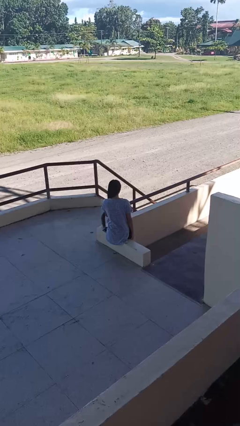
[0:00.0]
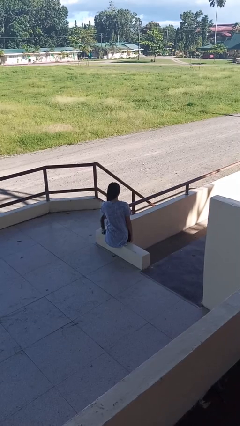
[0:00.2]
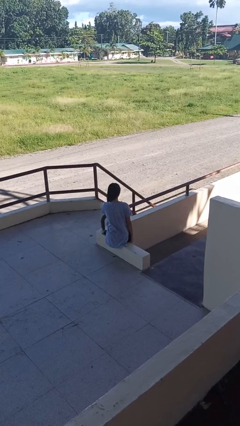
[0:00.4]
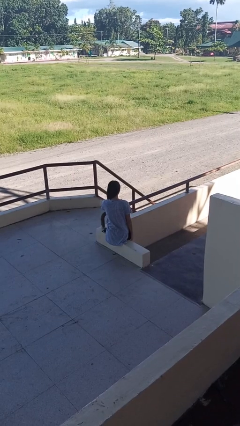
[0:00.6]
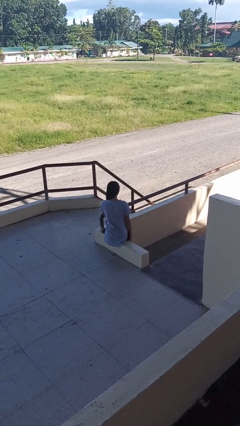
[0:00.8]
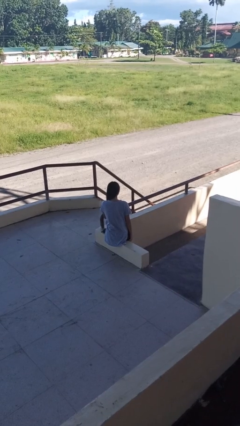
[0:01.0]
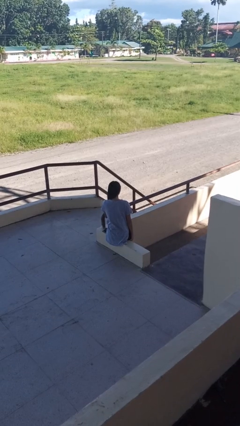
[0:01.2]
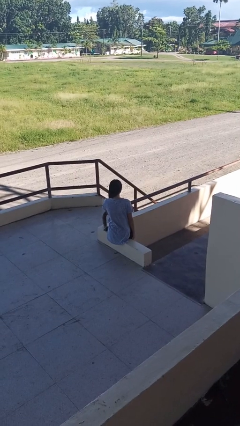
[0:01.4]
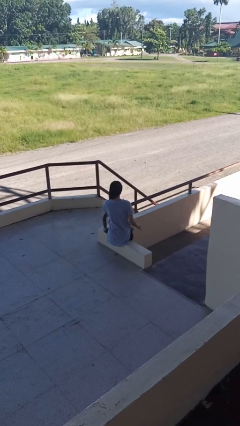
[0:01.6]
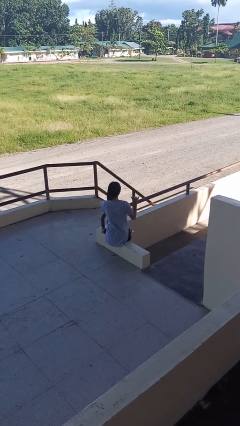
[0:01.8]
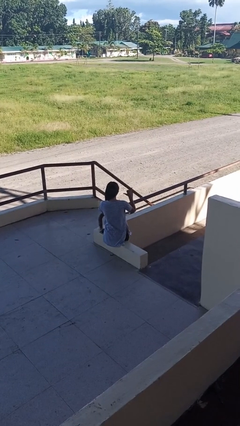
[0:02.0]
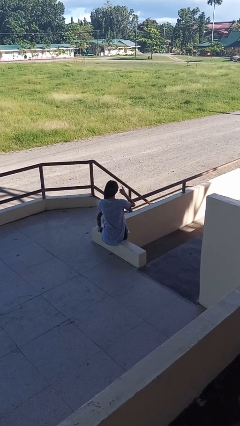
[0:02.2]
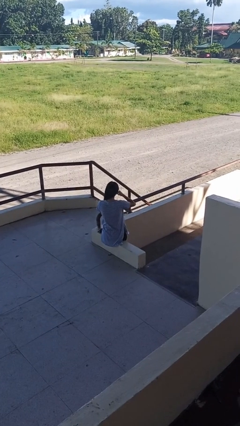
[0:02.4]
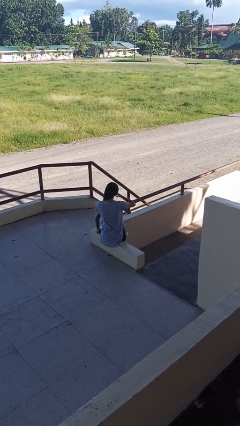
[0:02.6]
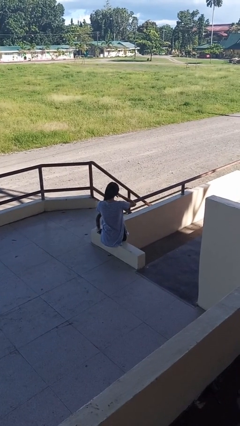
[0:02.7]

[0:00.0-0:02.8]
person gestures call me

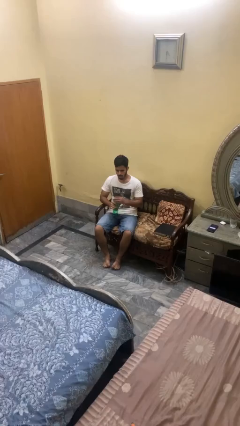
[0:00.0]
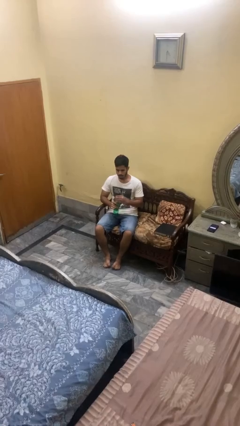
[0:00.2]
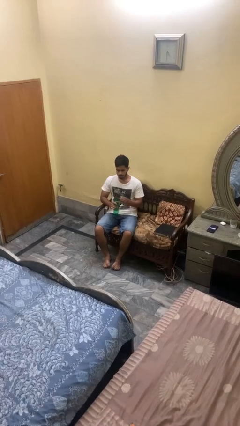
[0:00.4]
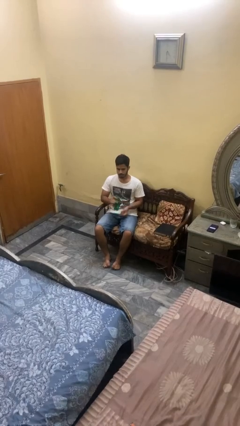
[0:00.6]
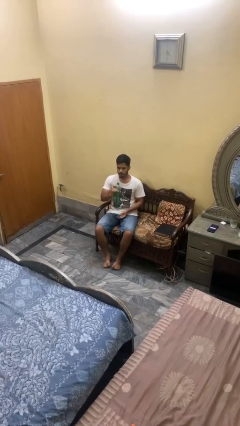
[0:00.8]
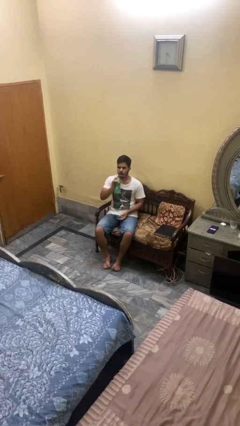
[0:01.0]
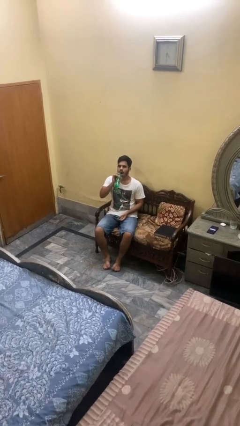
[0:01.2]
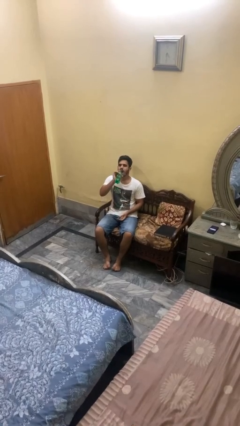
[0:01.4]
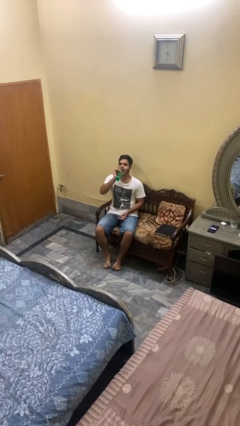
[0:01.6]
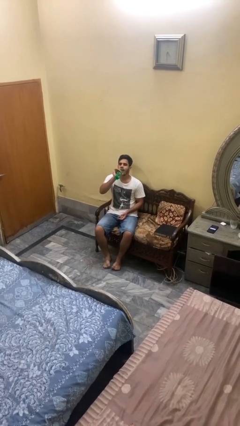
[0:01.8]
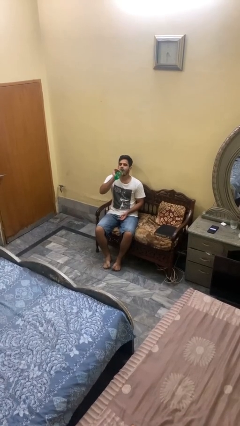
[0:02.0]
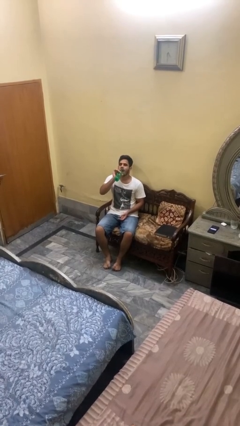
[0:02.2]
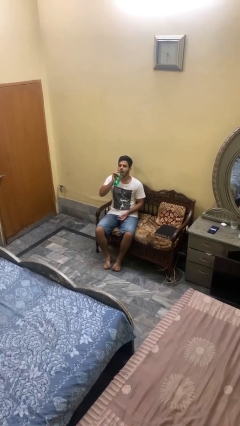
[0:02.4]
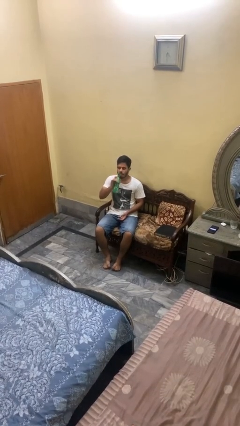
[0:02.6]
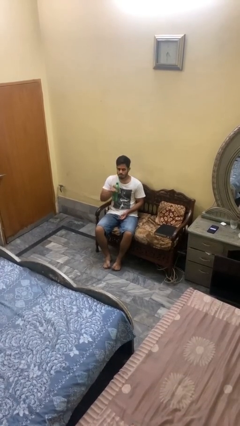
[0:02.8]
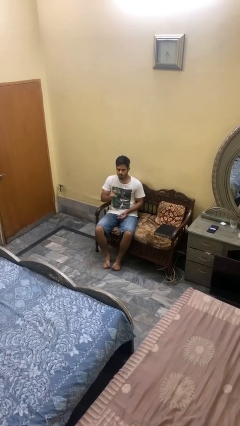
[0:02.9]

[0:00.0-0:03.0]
person drinks from bottle

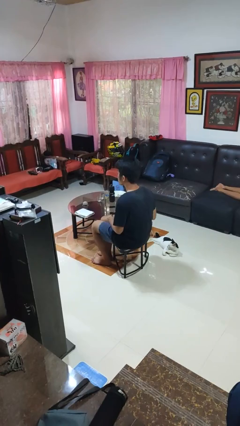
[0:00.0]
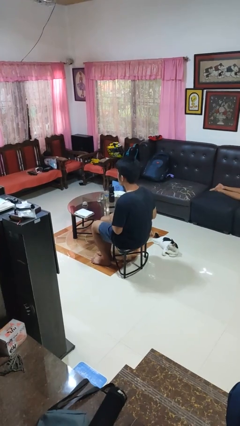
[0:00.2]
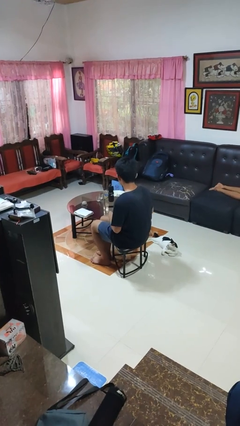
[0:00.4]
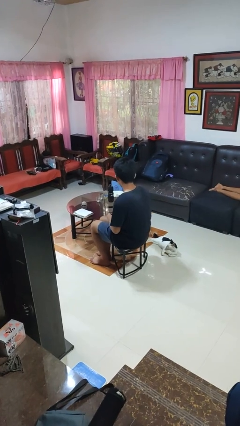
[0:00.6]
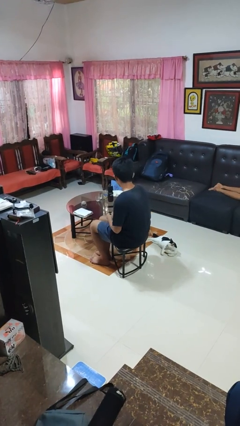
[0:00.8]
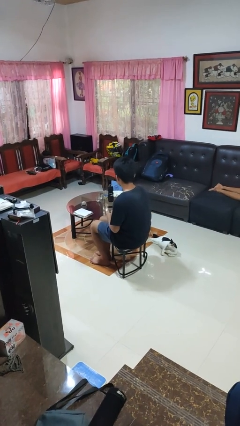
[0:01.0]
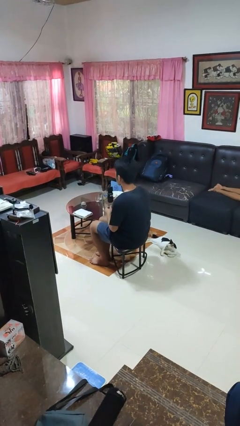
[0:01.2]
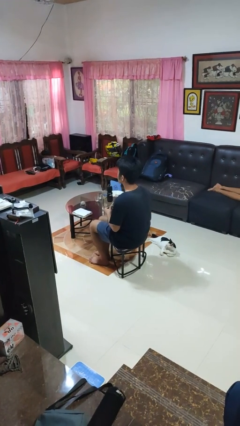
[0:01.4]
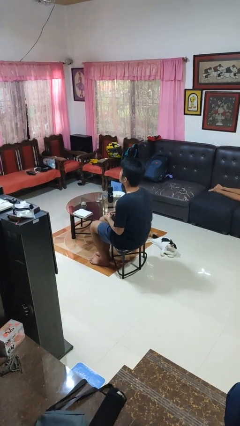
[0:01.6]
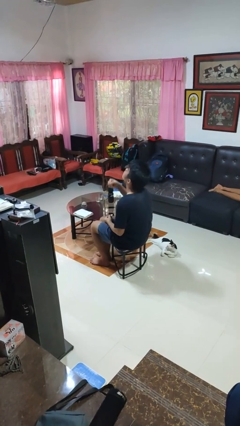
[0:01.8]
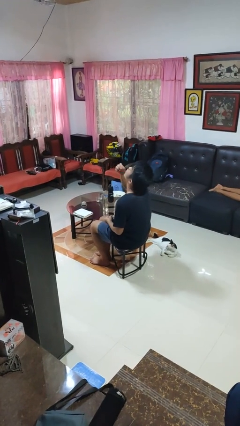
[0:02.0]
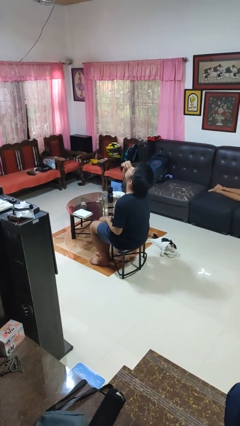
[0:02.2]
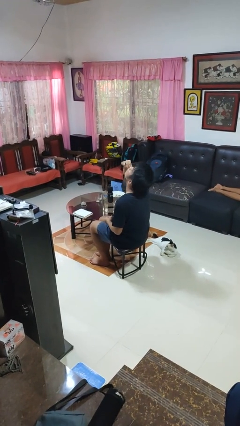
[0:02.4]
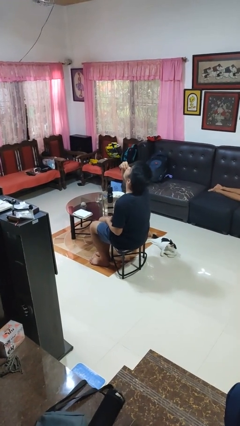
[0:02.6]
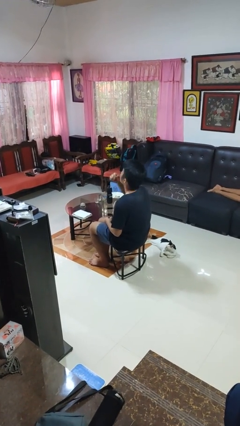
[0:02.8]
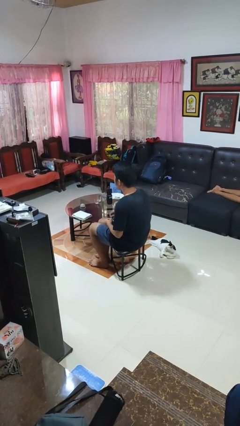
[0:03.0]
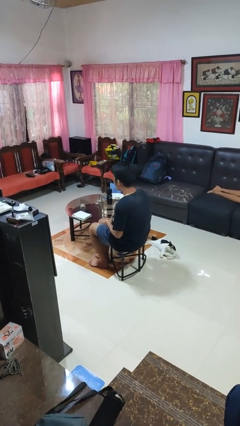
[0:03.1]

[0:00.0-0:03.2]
person takes medicine pills

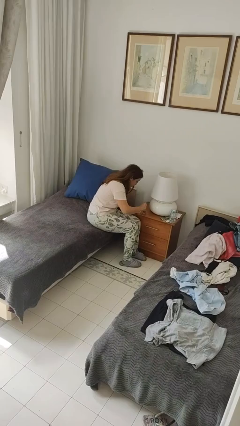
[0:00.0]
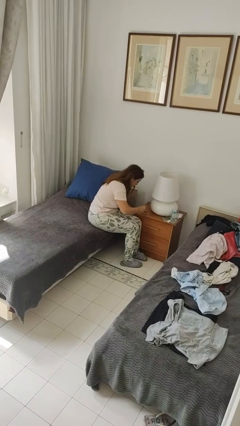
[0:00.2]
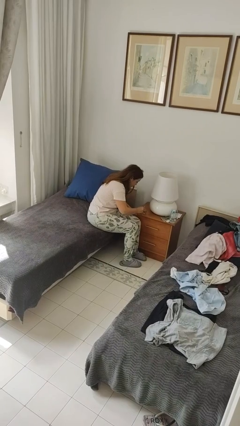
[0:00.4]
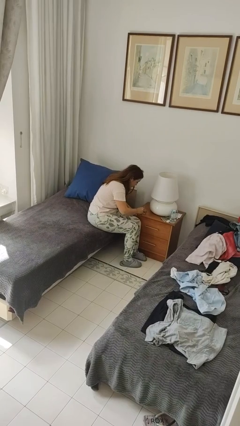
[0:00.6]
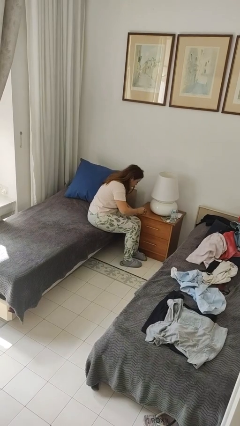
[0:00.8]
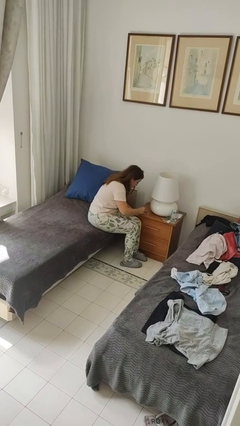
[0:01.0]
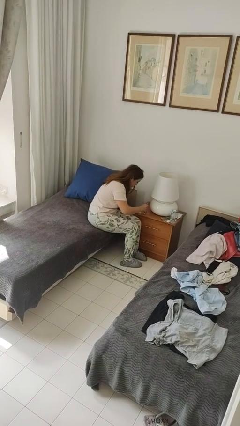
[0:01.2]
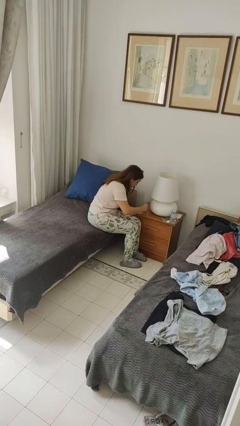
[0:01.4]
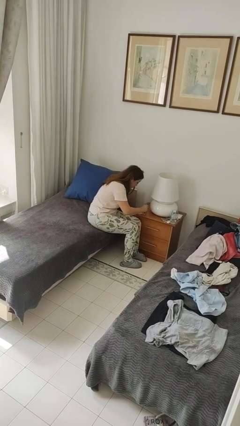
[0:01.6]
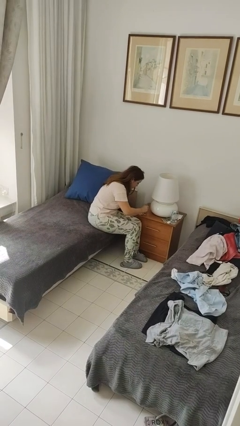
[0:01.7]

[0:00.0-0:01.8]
person paints fingernails

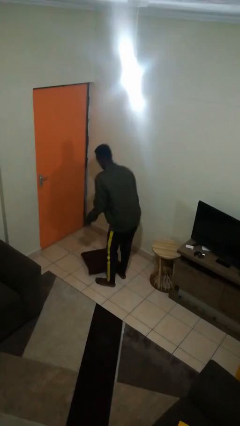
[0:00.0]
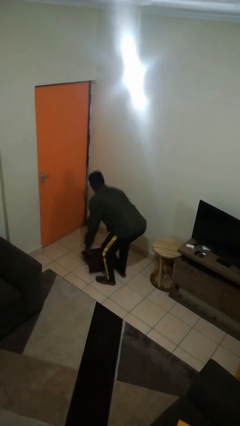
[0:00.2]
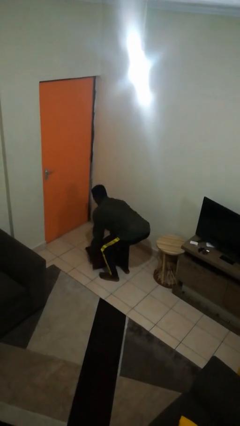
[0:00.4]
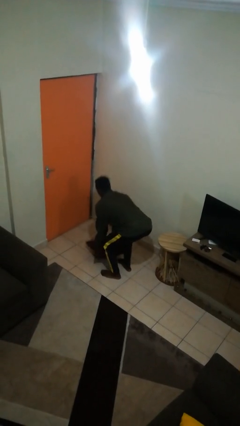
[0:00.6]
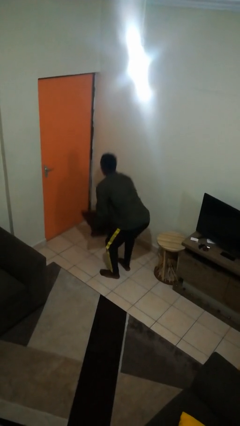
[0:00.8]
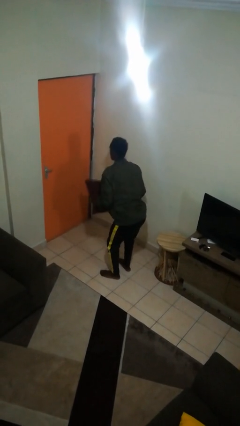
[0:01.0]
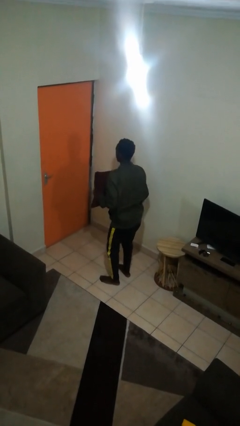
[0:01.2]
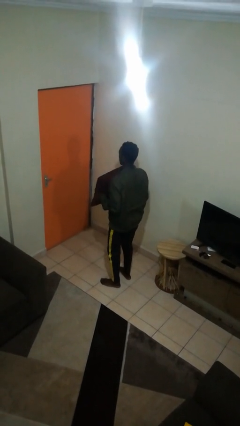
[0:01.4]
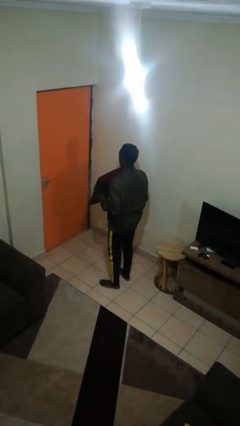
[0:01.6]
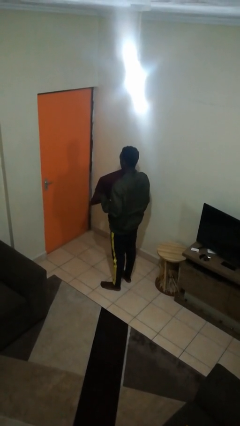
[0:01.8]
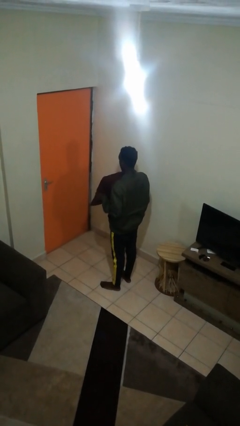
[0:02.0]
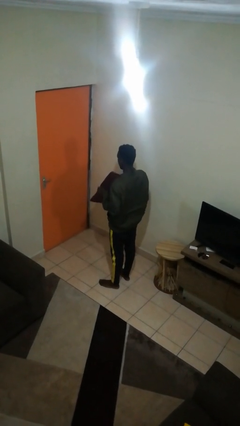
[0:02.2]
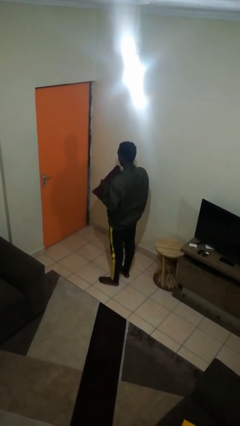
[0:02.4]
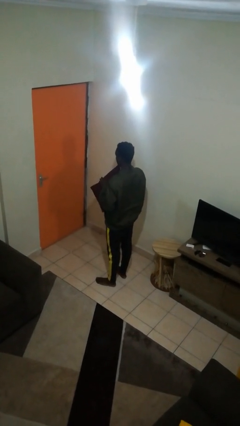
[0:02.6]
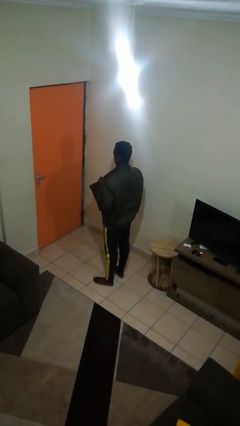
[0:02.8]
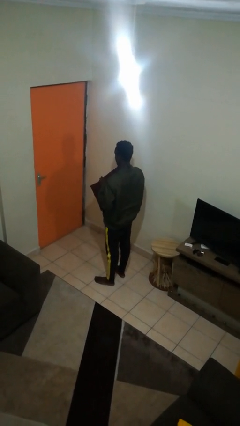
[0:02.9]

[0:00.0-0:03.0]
person picks up object from floor

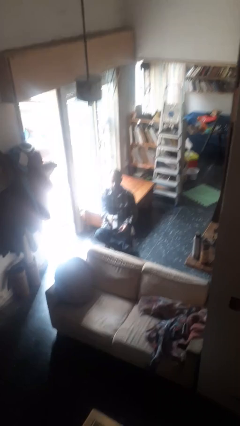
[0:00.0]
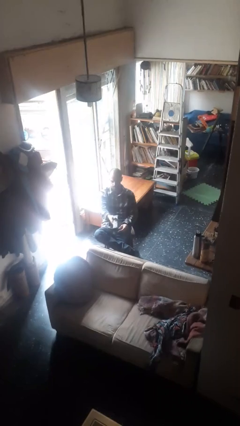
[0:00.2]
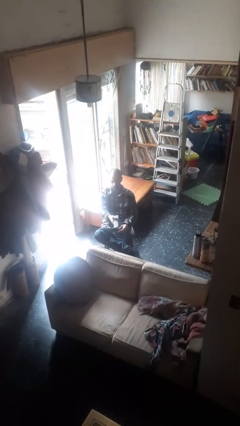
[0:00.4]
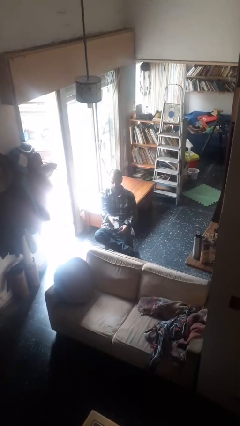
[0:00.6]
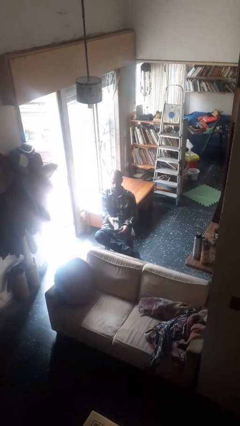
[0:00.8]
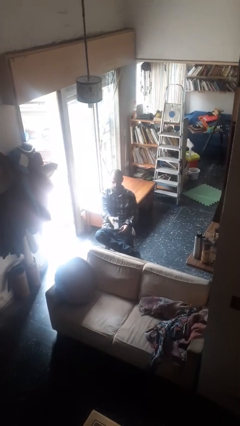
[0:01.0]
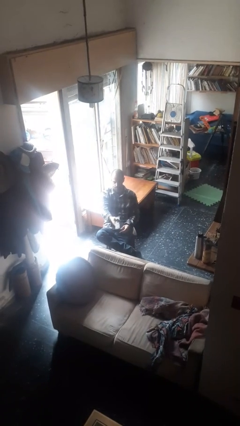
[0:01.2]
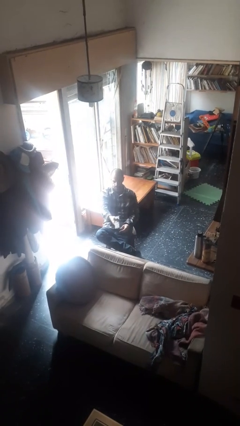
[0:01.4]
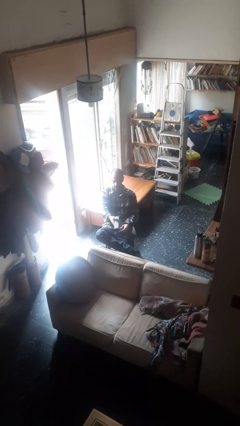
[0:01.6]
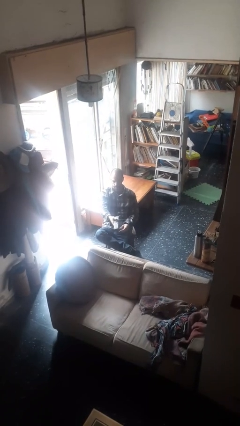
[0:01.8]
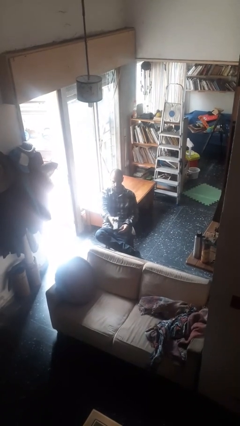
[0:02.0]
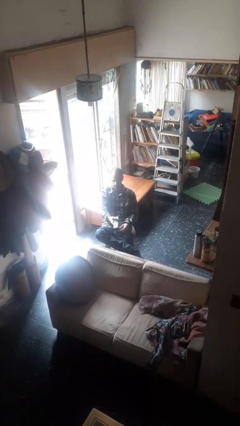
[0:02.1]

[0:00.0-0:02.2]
person uses television remote

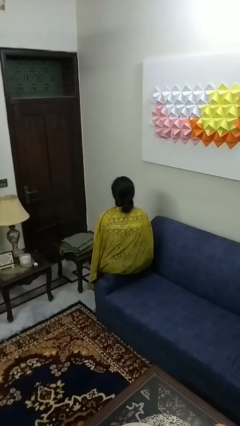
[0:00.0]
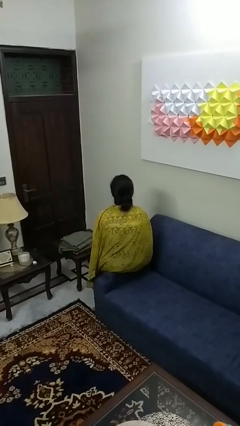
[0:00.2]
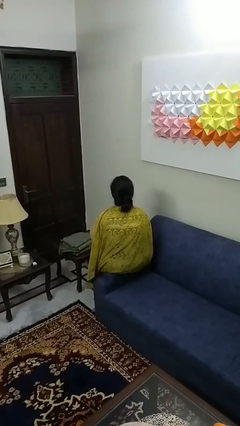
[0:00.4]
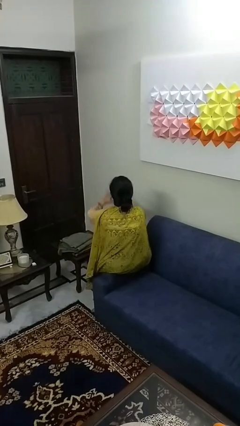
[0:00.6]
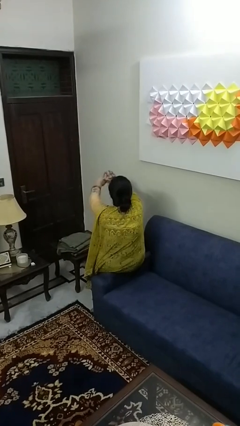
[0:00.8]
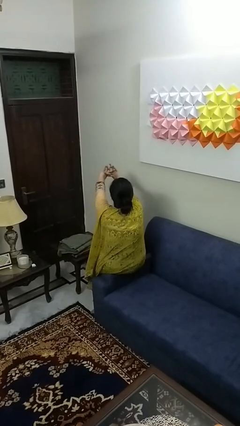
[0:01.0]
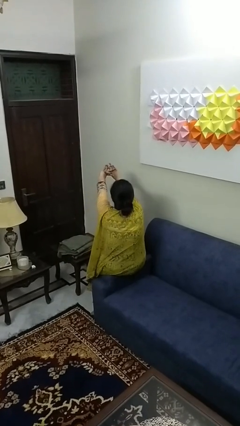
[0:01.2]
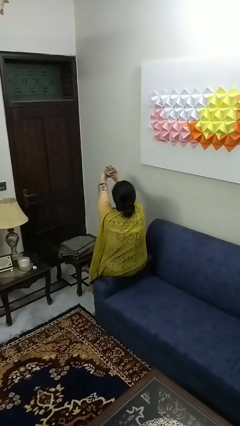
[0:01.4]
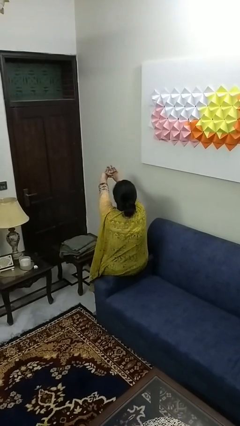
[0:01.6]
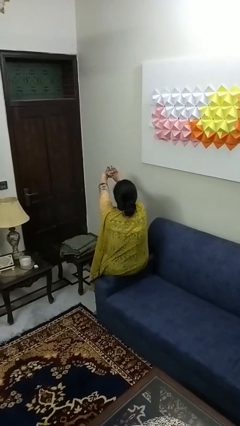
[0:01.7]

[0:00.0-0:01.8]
person cracks knuckles
